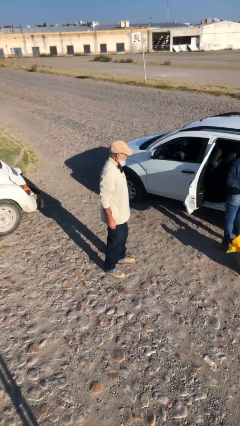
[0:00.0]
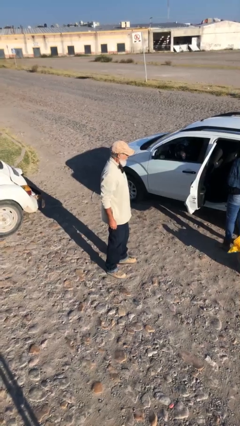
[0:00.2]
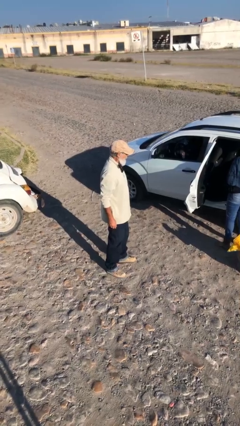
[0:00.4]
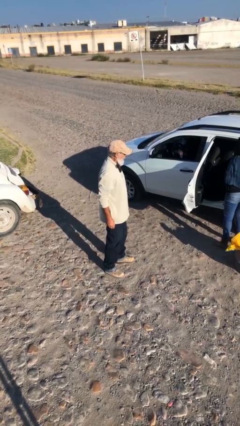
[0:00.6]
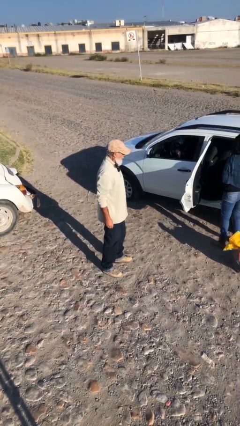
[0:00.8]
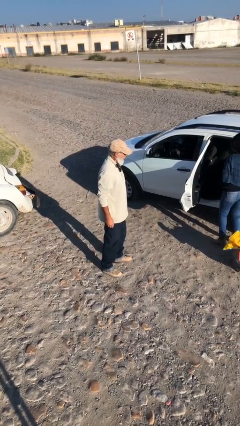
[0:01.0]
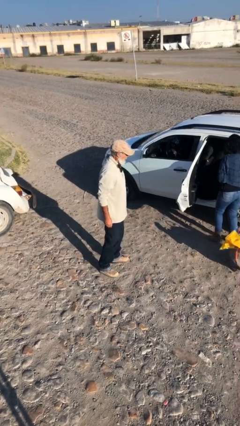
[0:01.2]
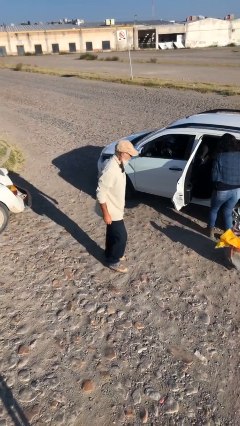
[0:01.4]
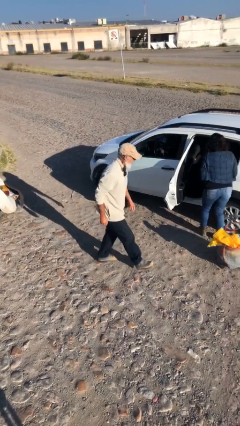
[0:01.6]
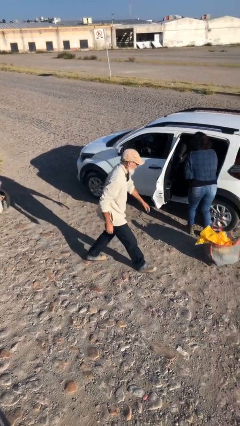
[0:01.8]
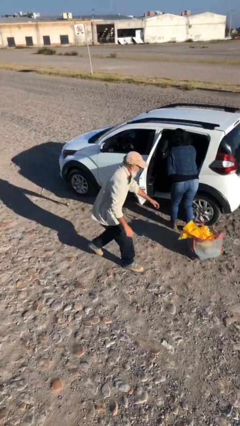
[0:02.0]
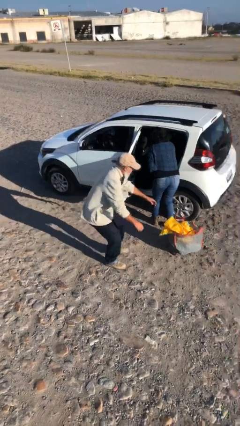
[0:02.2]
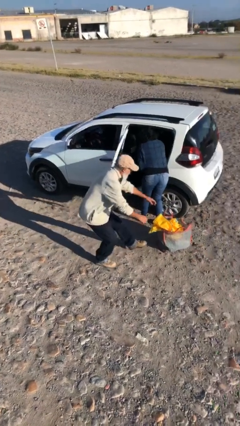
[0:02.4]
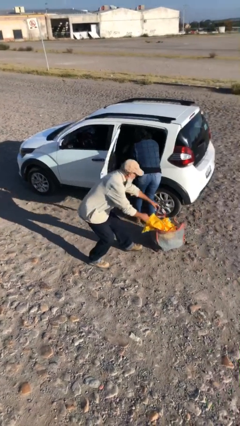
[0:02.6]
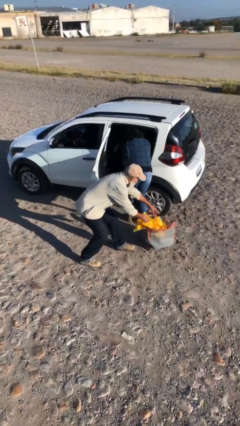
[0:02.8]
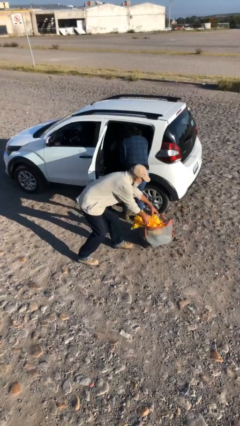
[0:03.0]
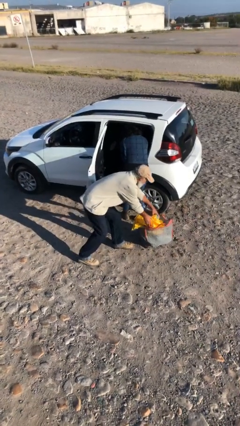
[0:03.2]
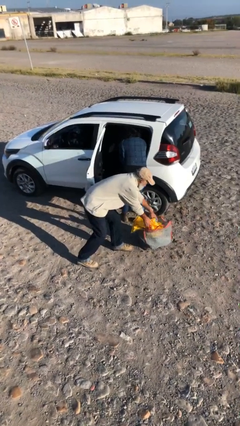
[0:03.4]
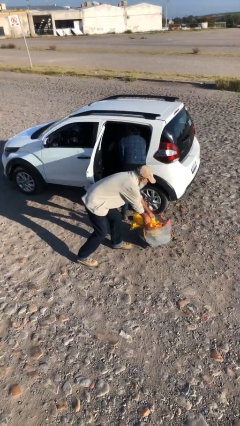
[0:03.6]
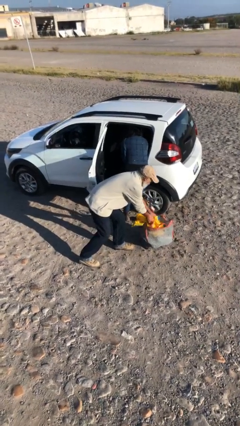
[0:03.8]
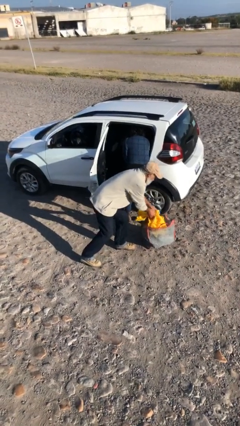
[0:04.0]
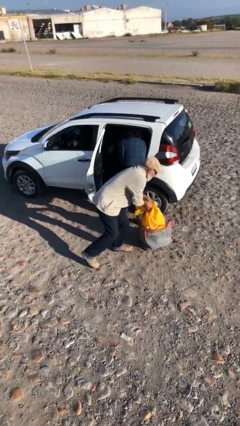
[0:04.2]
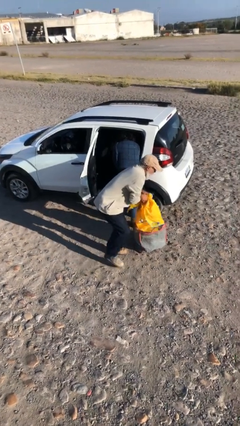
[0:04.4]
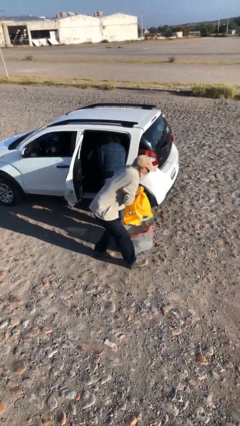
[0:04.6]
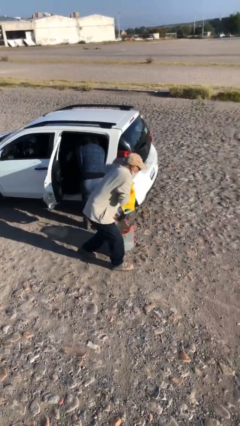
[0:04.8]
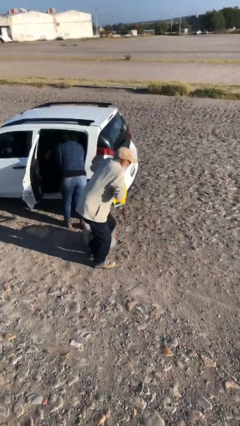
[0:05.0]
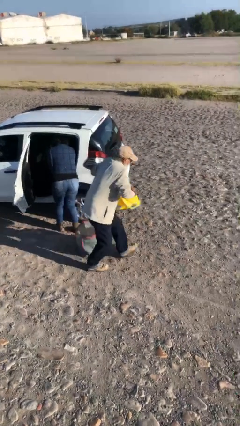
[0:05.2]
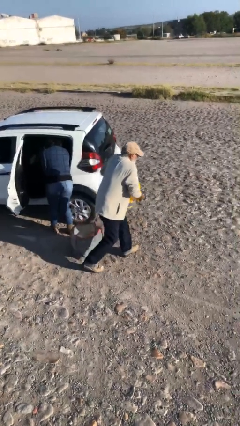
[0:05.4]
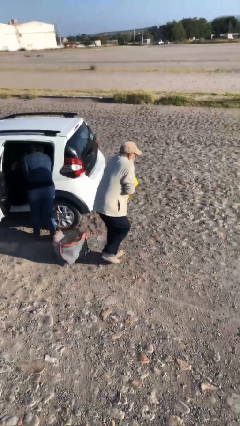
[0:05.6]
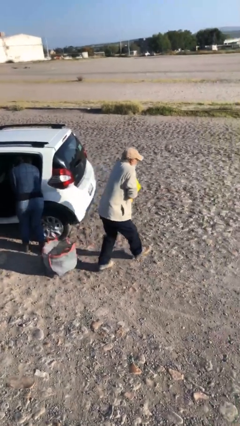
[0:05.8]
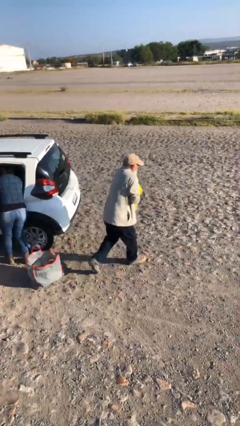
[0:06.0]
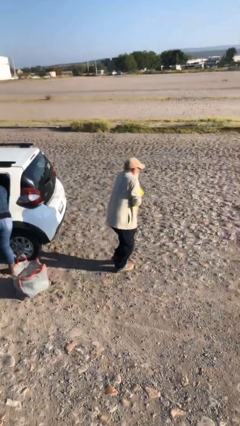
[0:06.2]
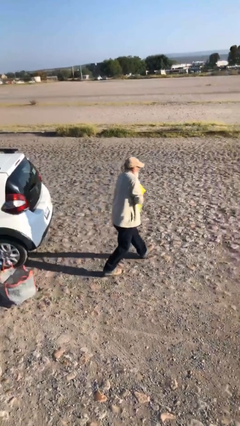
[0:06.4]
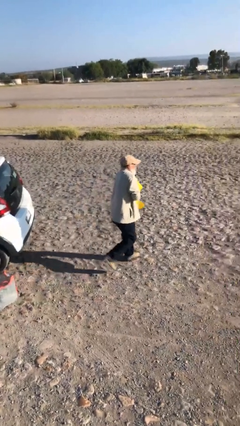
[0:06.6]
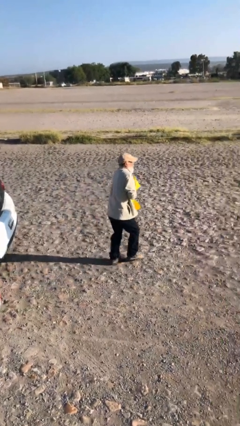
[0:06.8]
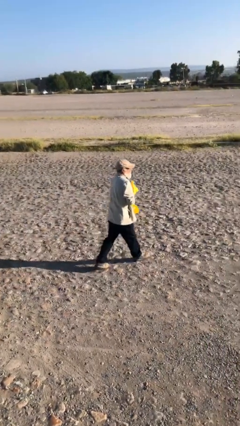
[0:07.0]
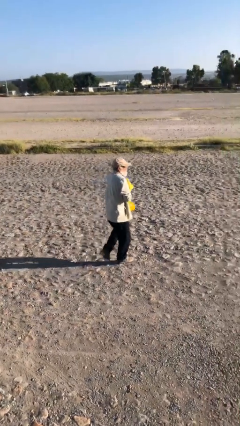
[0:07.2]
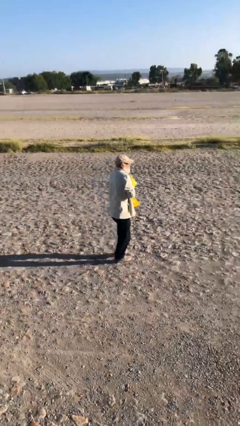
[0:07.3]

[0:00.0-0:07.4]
person steals object from person

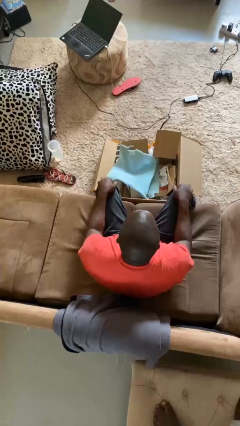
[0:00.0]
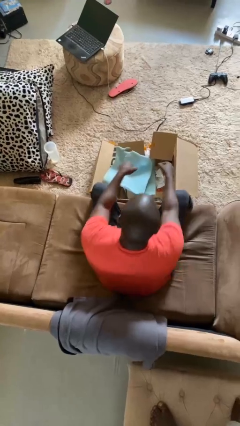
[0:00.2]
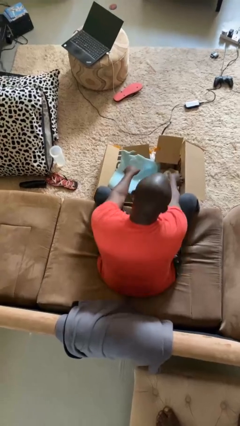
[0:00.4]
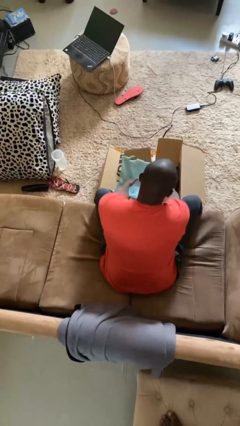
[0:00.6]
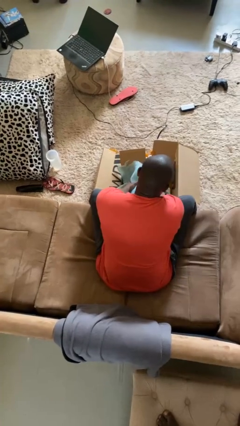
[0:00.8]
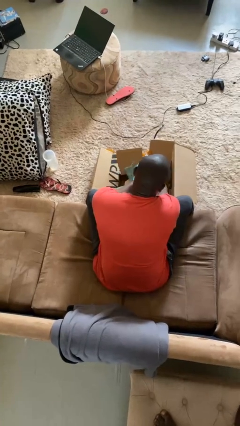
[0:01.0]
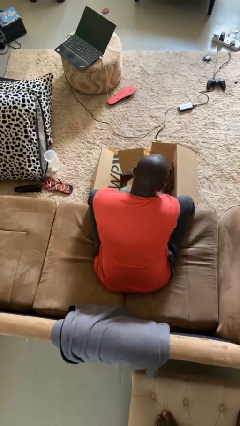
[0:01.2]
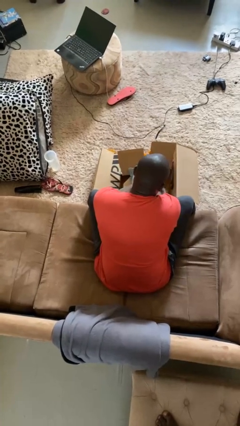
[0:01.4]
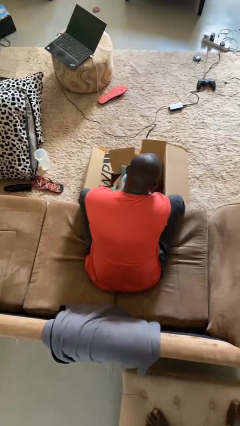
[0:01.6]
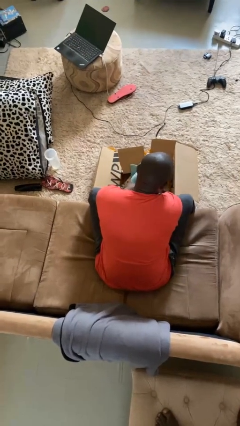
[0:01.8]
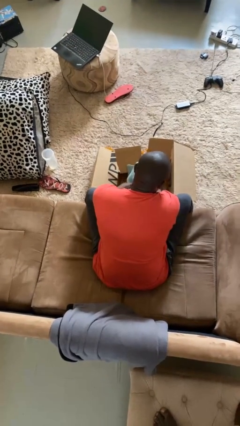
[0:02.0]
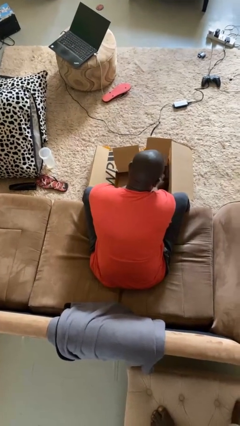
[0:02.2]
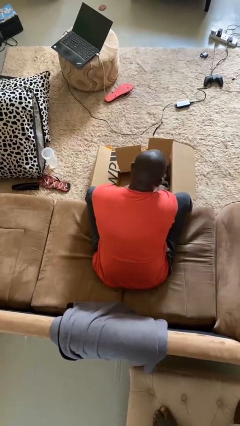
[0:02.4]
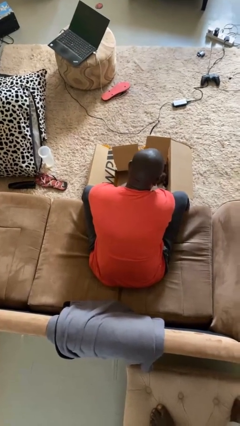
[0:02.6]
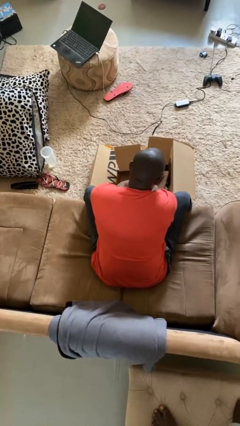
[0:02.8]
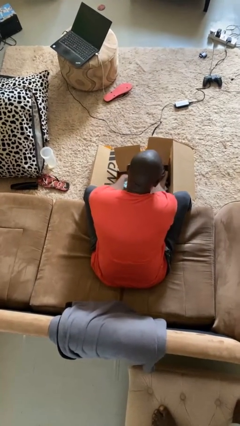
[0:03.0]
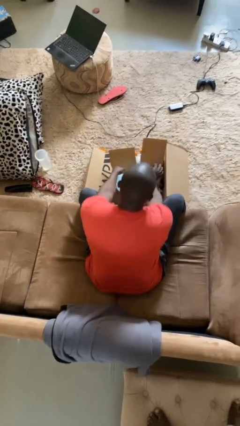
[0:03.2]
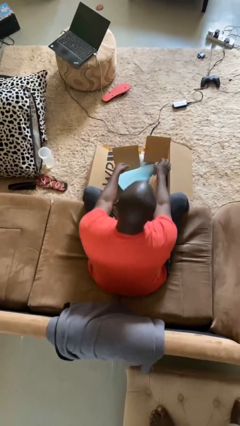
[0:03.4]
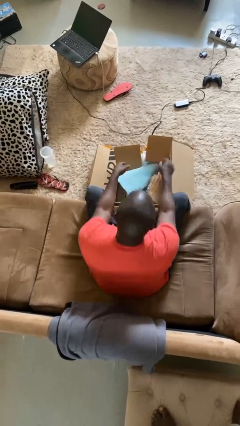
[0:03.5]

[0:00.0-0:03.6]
person searches in box

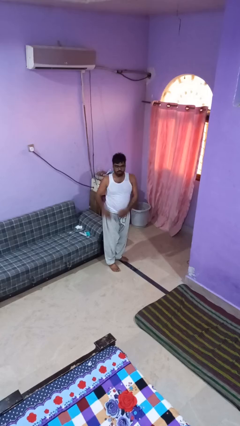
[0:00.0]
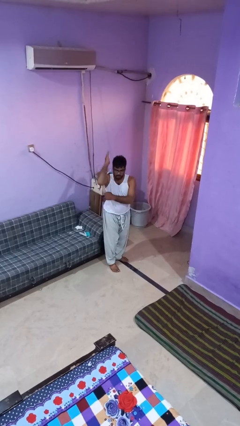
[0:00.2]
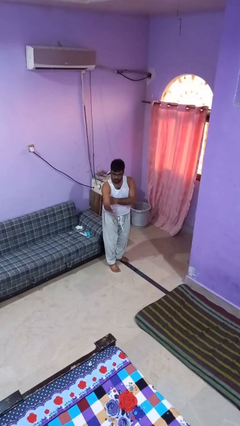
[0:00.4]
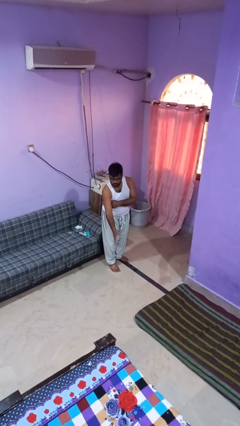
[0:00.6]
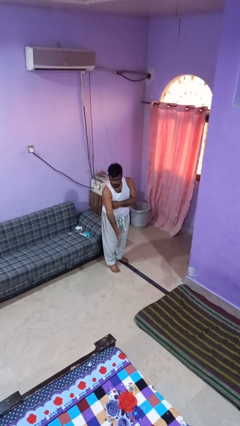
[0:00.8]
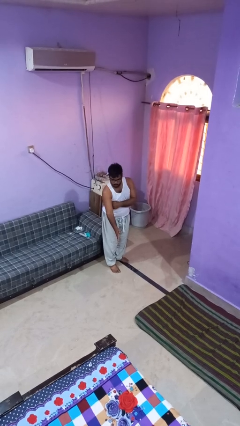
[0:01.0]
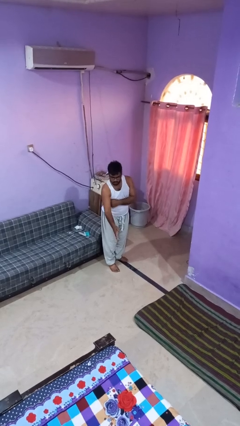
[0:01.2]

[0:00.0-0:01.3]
person karate chop

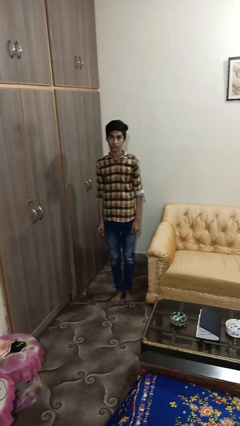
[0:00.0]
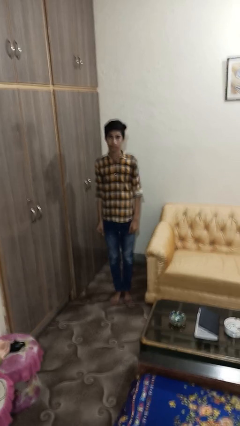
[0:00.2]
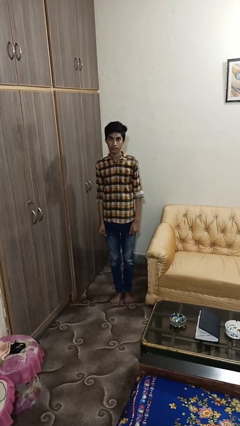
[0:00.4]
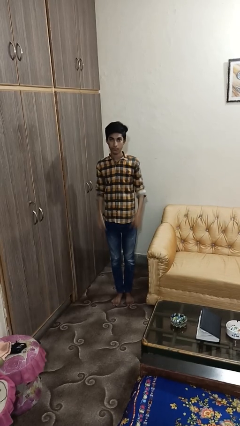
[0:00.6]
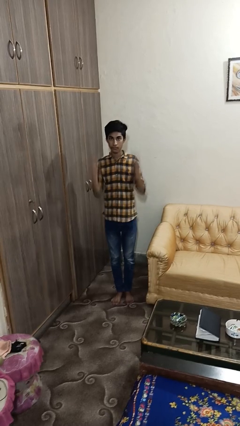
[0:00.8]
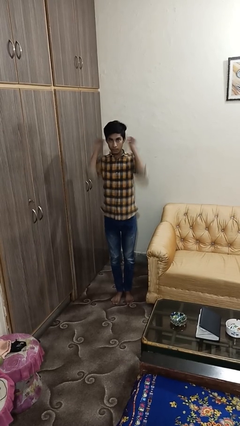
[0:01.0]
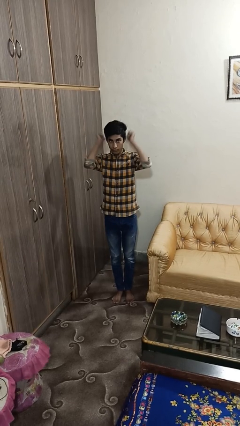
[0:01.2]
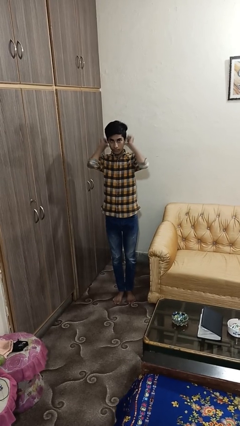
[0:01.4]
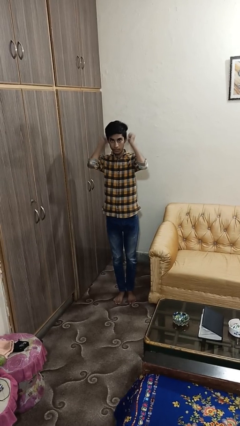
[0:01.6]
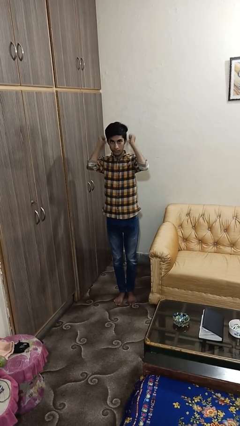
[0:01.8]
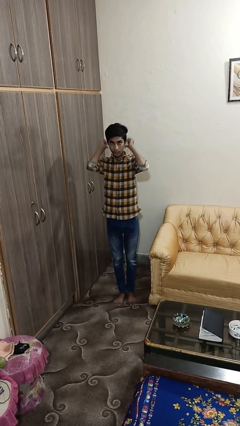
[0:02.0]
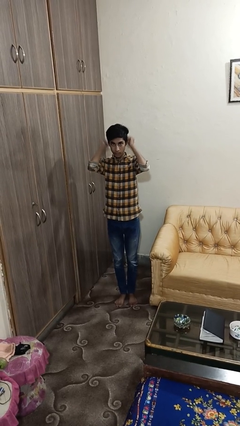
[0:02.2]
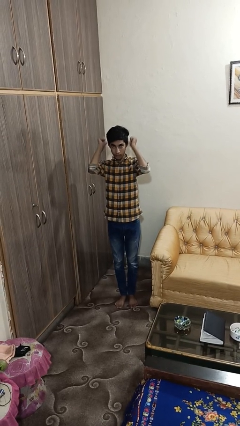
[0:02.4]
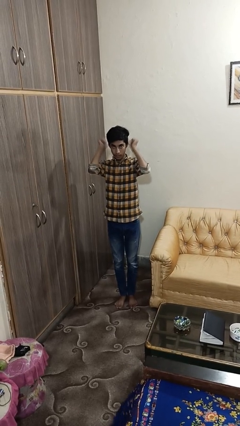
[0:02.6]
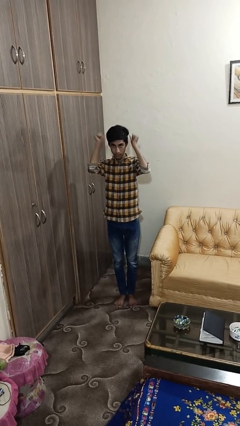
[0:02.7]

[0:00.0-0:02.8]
person gestures behind me

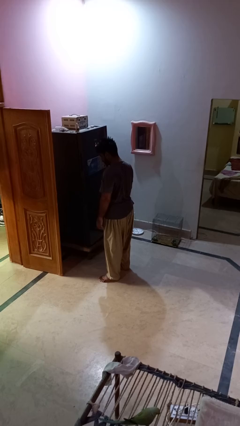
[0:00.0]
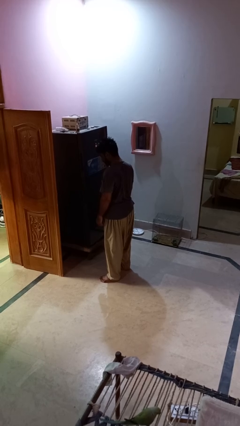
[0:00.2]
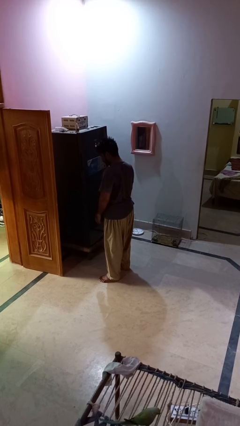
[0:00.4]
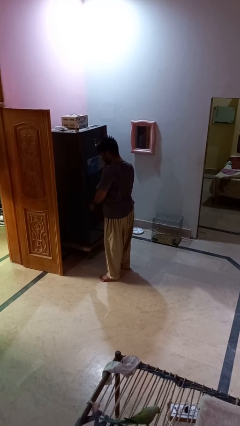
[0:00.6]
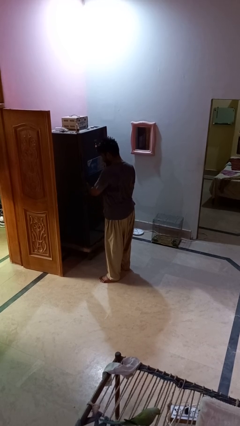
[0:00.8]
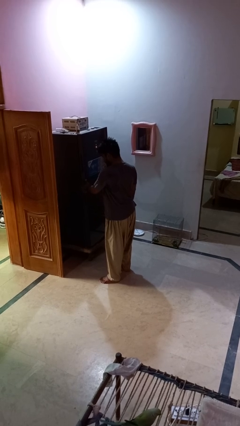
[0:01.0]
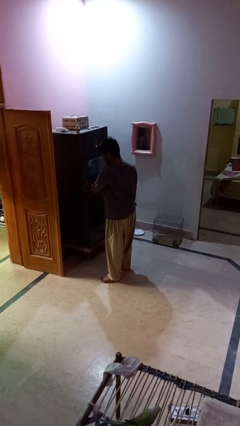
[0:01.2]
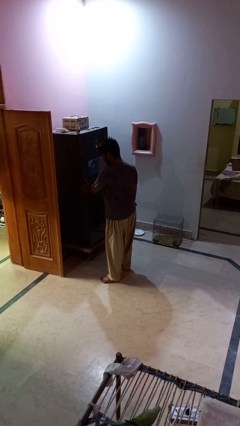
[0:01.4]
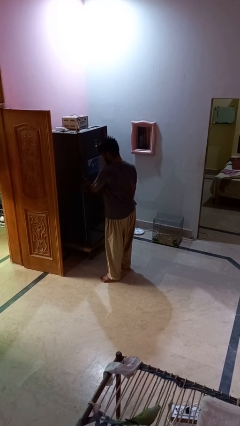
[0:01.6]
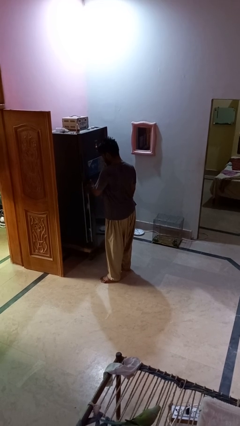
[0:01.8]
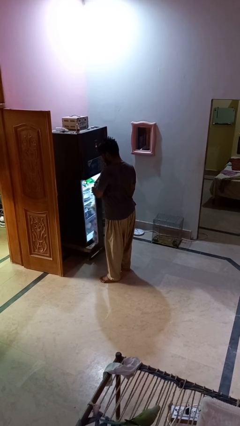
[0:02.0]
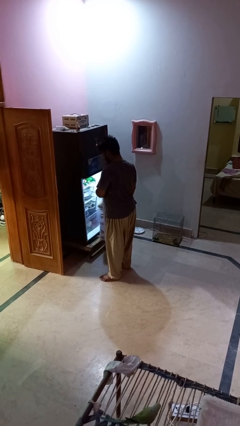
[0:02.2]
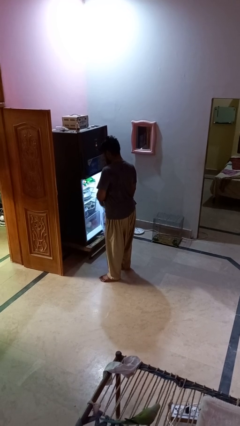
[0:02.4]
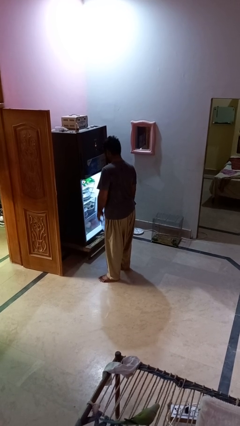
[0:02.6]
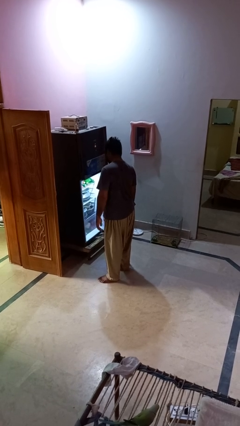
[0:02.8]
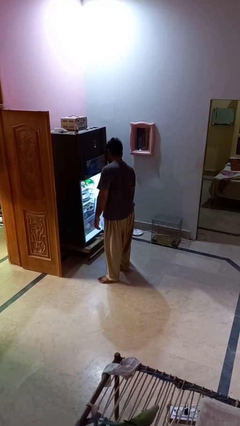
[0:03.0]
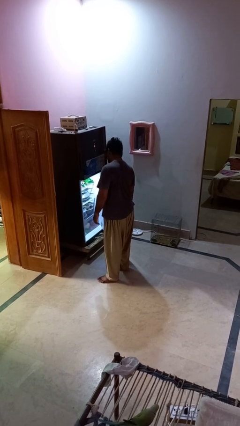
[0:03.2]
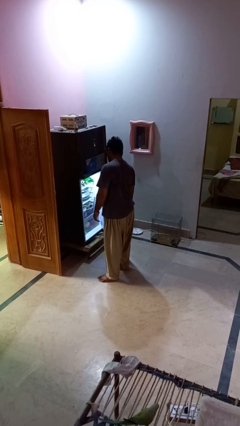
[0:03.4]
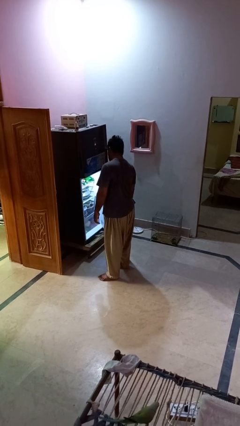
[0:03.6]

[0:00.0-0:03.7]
person opens refrigerator
